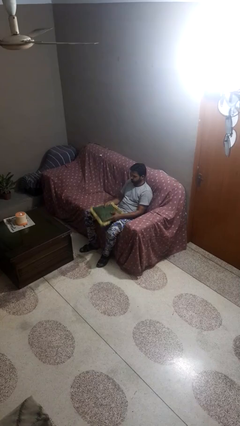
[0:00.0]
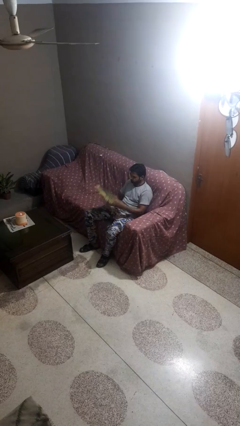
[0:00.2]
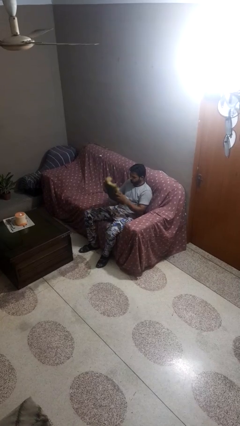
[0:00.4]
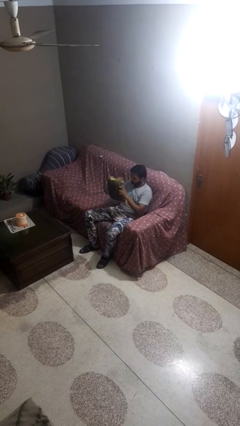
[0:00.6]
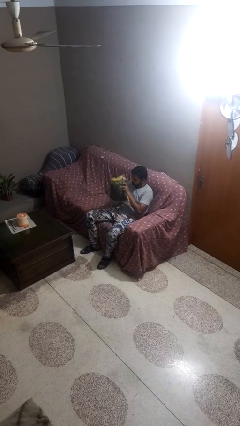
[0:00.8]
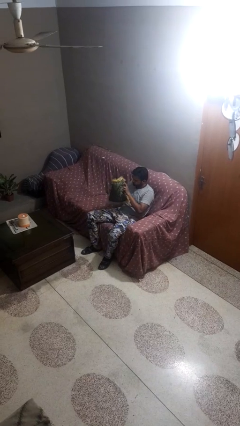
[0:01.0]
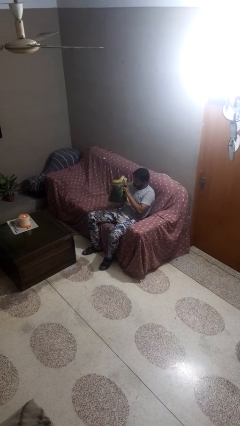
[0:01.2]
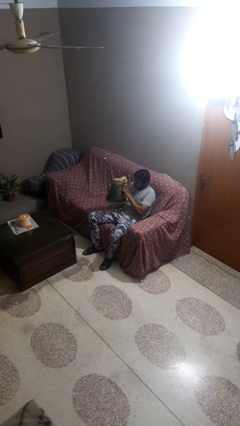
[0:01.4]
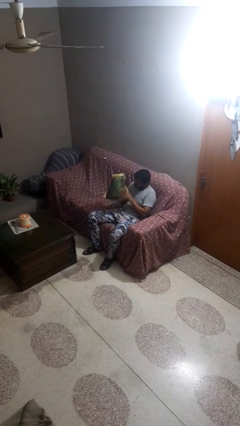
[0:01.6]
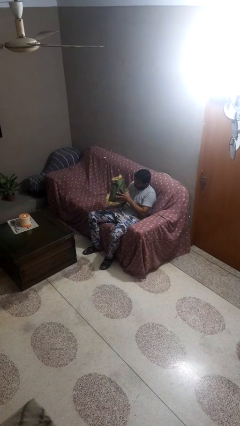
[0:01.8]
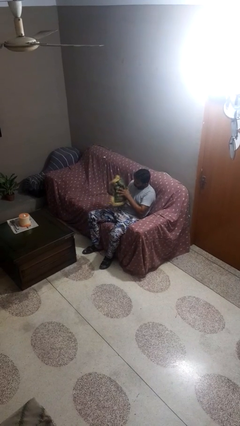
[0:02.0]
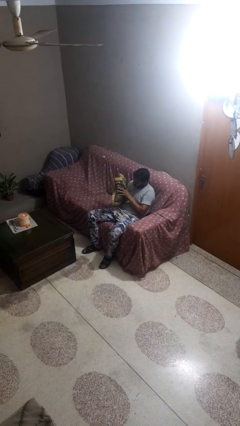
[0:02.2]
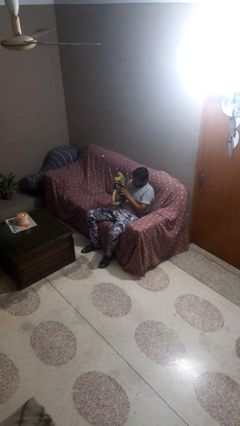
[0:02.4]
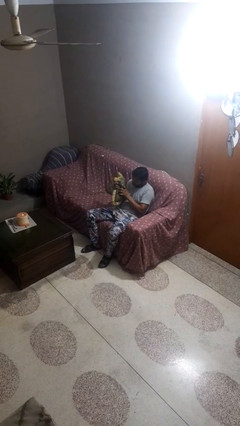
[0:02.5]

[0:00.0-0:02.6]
person squeezes object

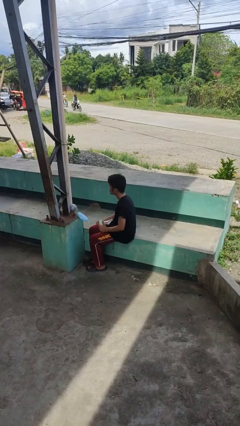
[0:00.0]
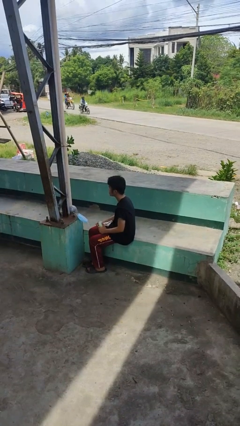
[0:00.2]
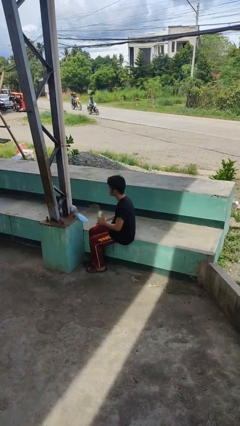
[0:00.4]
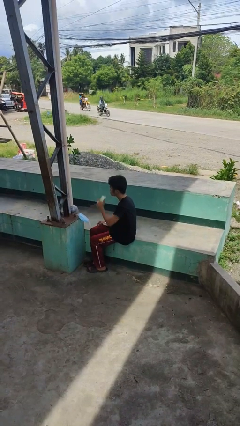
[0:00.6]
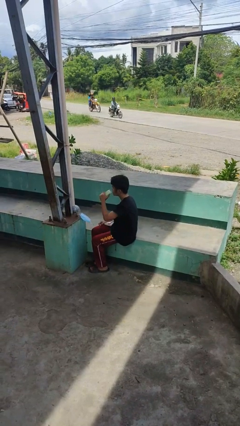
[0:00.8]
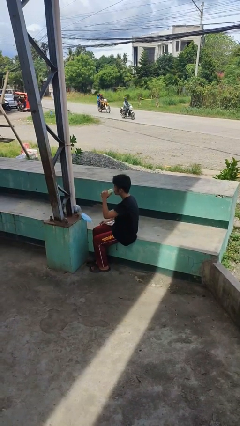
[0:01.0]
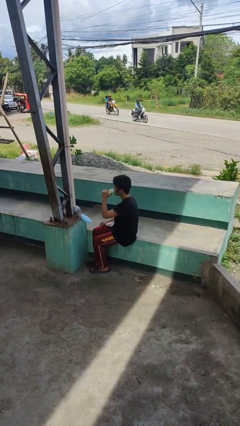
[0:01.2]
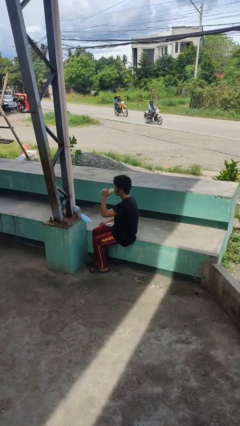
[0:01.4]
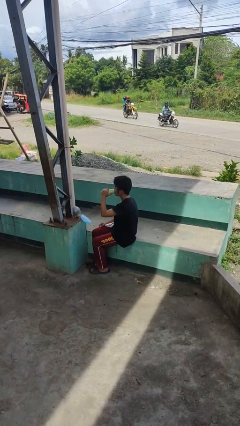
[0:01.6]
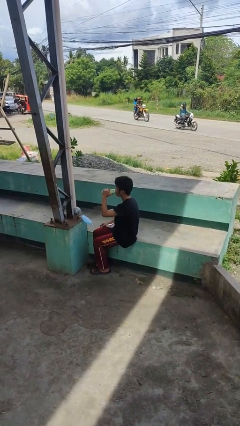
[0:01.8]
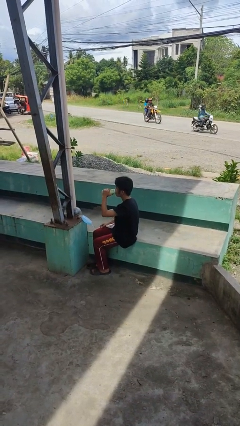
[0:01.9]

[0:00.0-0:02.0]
person interacts with tablet

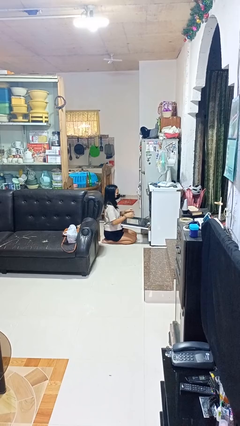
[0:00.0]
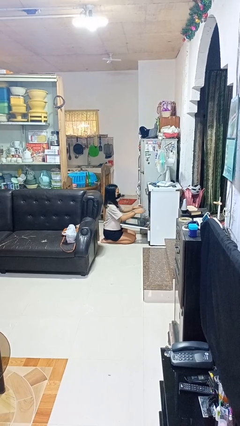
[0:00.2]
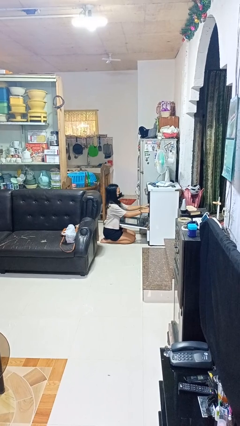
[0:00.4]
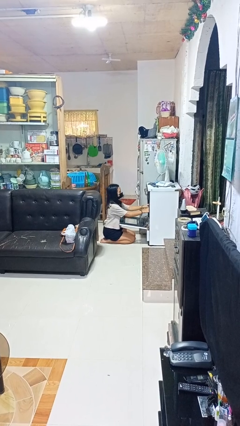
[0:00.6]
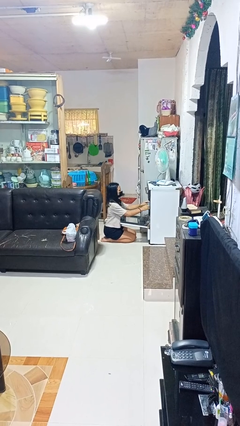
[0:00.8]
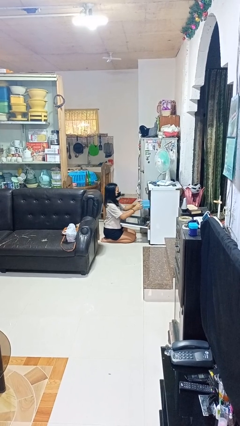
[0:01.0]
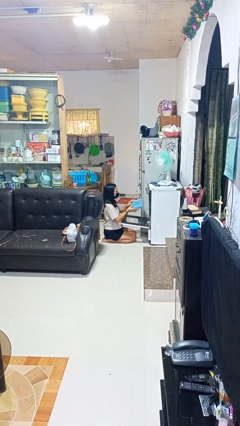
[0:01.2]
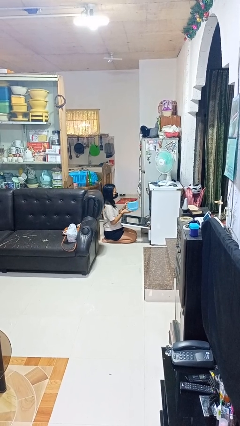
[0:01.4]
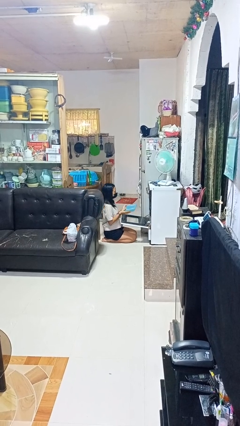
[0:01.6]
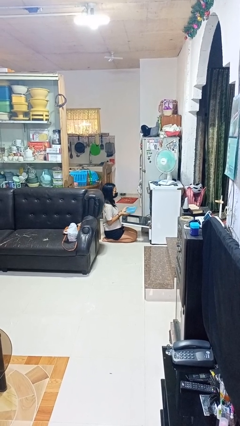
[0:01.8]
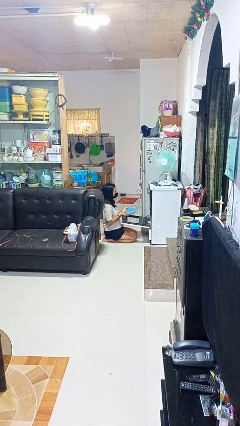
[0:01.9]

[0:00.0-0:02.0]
person takes object from oven

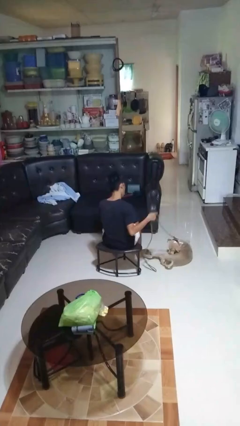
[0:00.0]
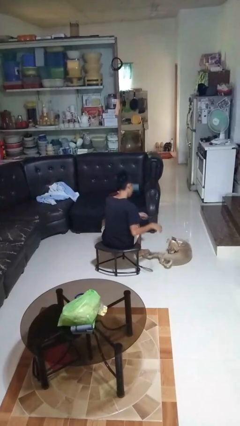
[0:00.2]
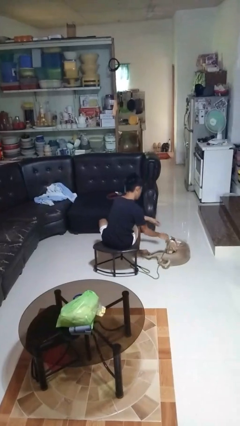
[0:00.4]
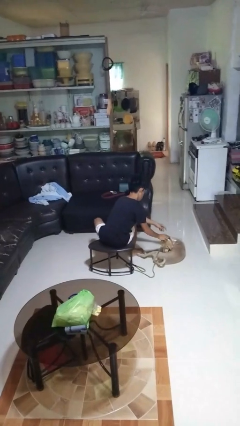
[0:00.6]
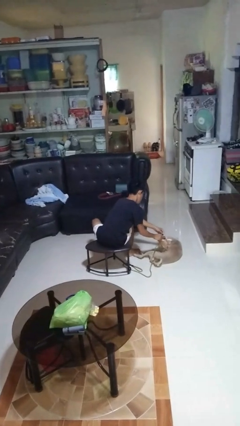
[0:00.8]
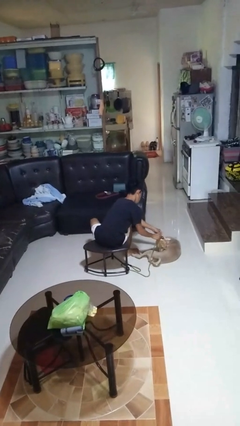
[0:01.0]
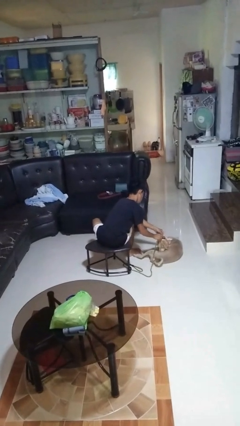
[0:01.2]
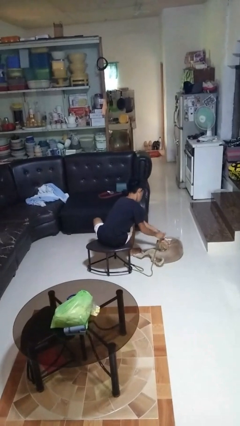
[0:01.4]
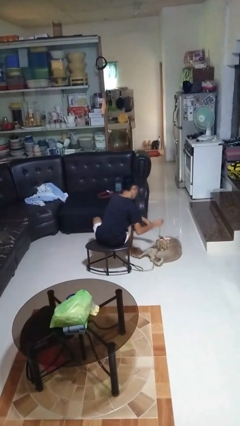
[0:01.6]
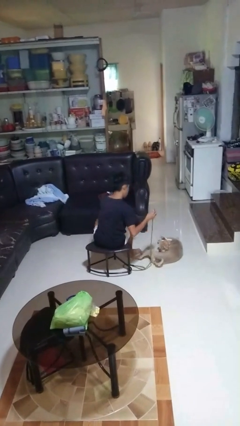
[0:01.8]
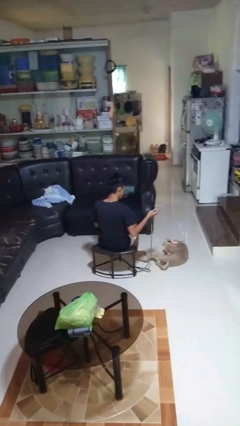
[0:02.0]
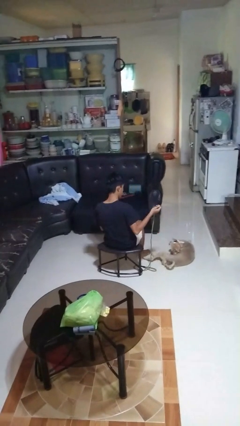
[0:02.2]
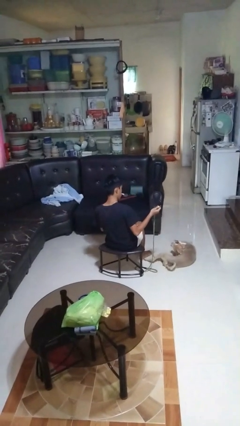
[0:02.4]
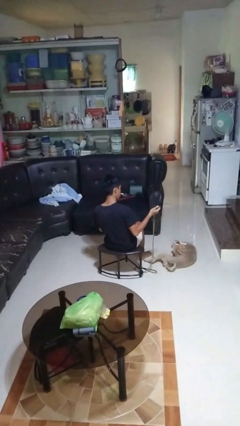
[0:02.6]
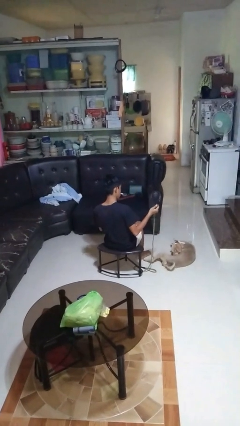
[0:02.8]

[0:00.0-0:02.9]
person unattaches leash from dog

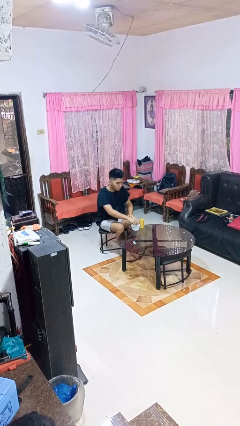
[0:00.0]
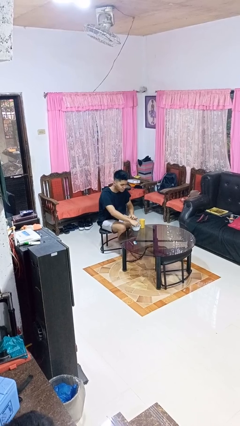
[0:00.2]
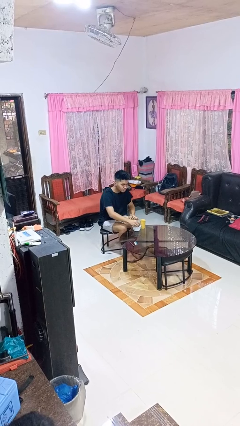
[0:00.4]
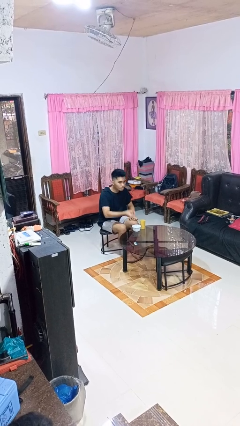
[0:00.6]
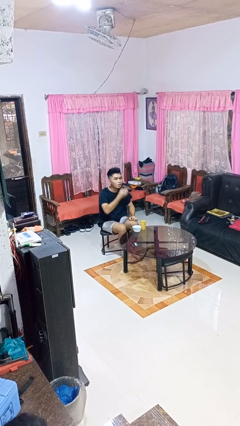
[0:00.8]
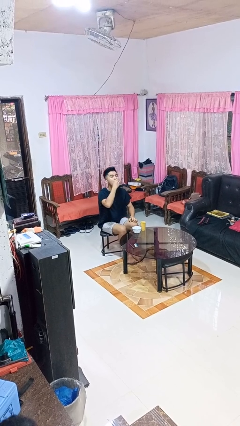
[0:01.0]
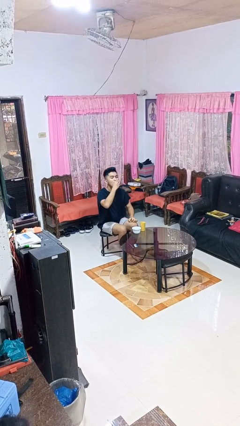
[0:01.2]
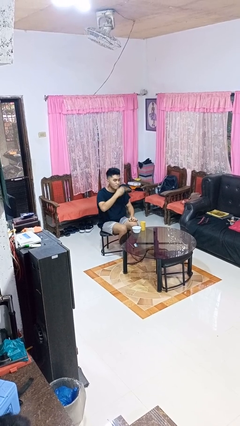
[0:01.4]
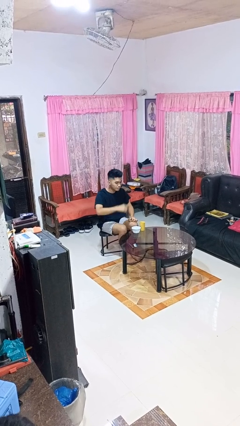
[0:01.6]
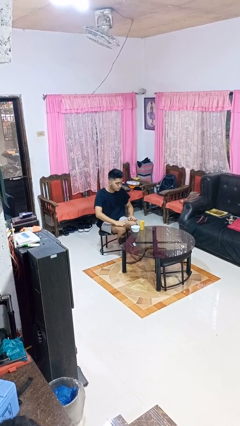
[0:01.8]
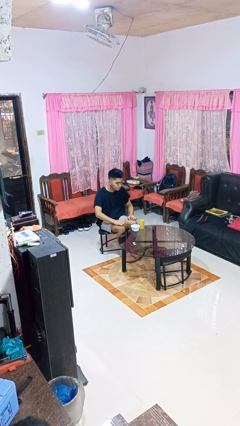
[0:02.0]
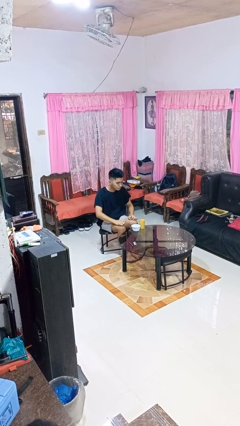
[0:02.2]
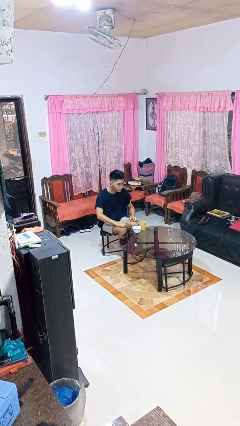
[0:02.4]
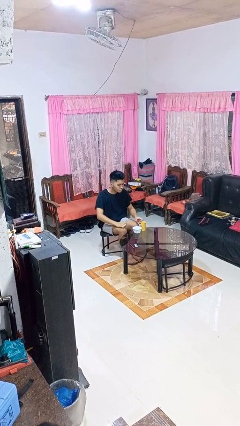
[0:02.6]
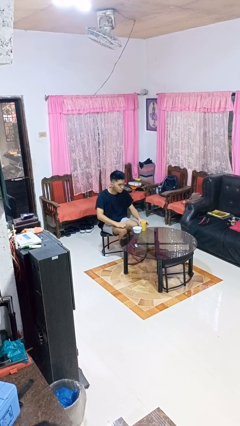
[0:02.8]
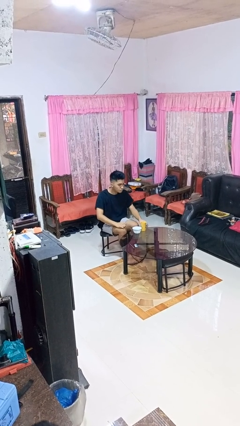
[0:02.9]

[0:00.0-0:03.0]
person takes medicine pills

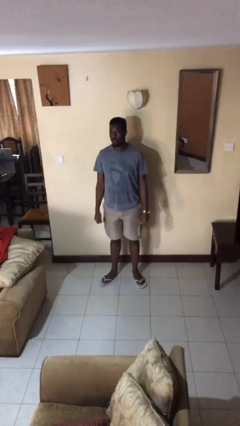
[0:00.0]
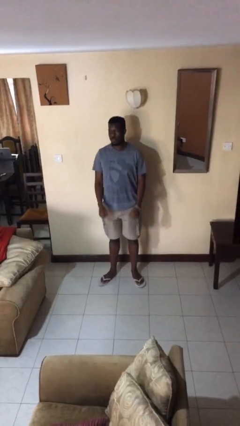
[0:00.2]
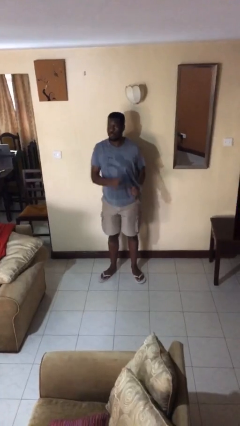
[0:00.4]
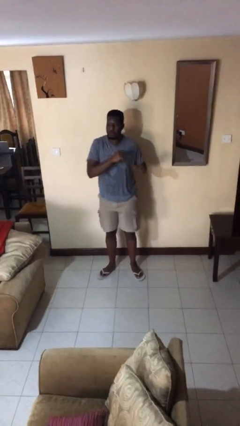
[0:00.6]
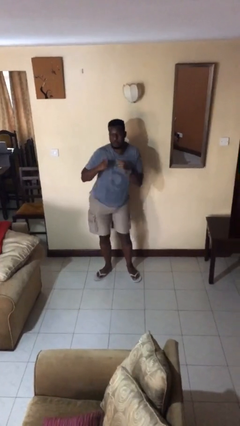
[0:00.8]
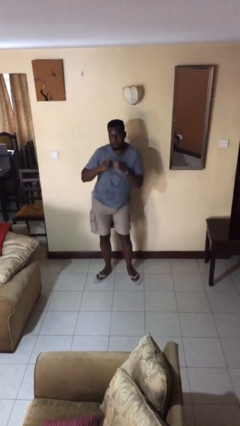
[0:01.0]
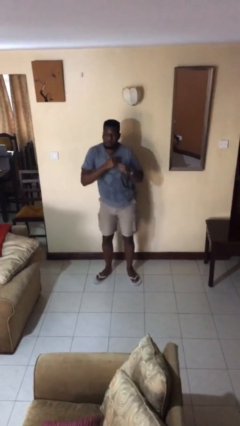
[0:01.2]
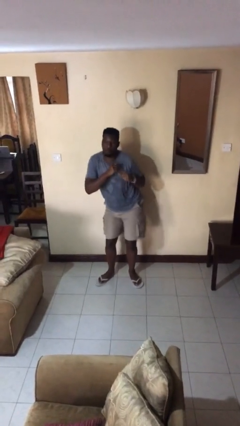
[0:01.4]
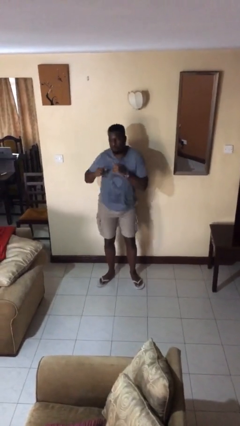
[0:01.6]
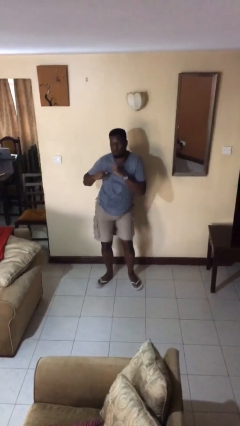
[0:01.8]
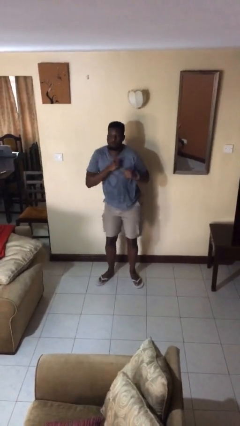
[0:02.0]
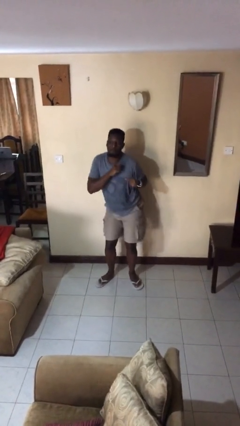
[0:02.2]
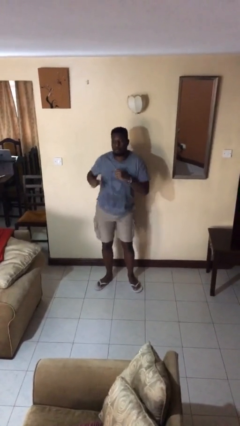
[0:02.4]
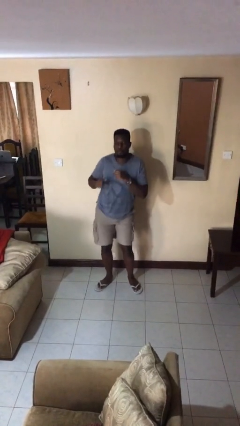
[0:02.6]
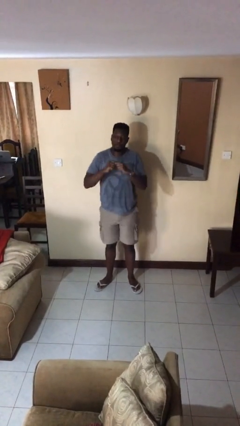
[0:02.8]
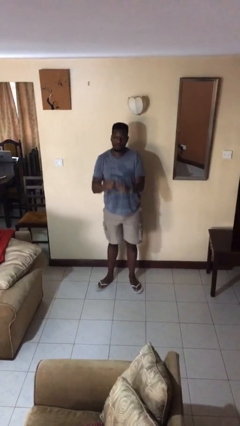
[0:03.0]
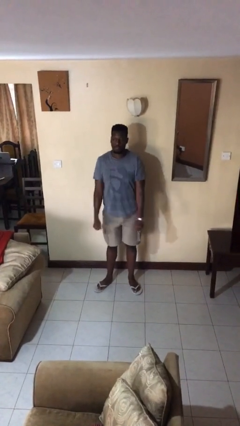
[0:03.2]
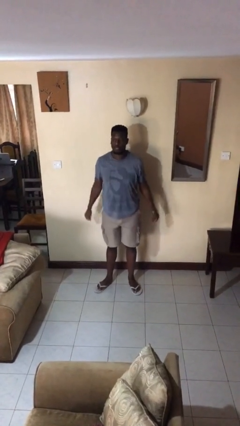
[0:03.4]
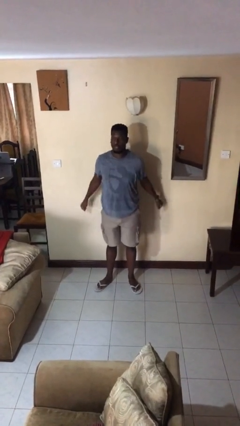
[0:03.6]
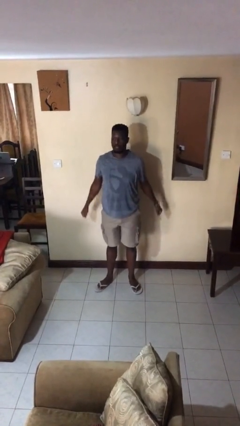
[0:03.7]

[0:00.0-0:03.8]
person wiggles hips

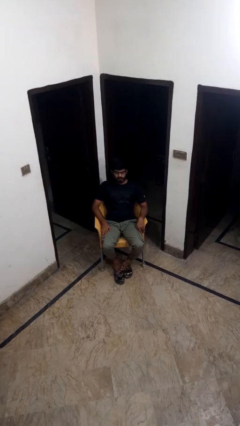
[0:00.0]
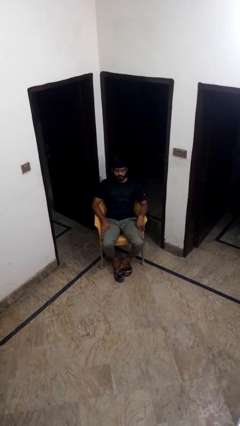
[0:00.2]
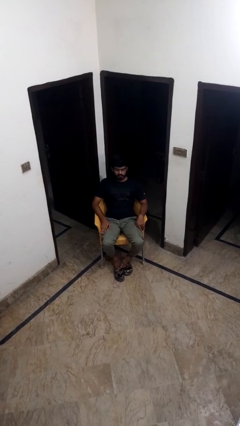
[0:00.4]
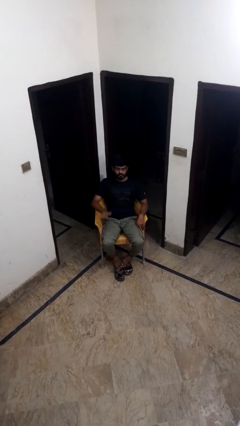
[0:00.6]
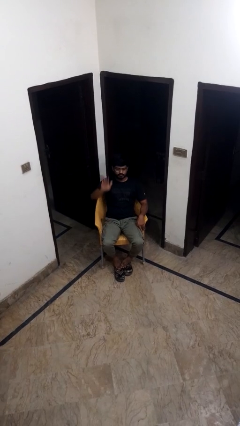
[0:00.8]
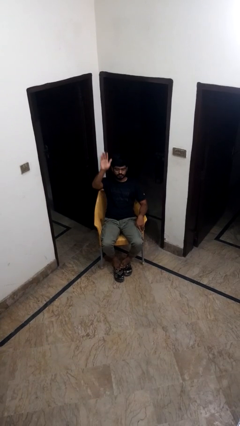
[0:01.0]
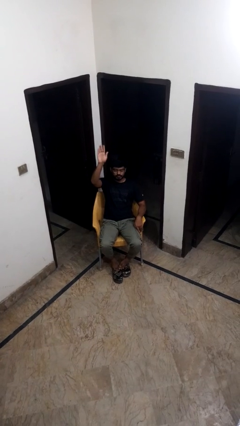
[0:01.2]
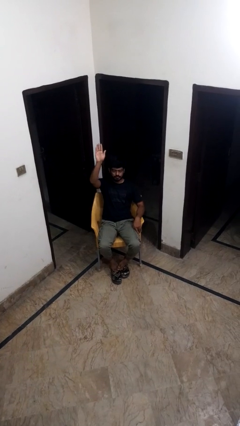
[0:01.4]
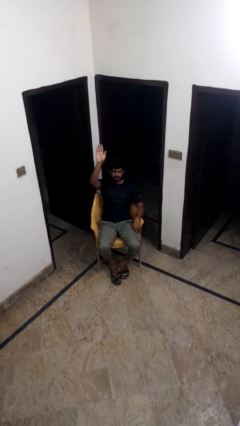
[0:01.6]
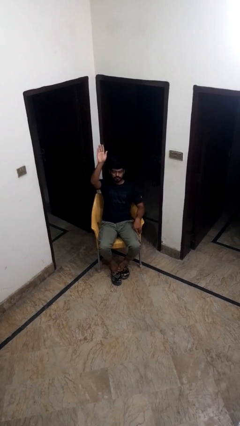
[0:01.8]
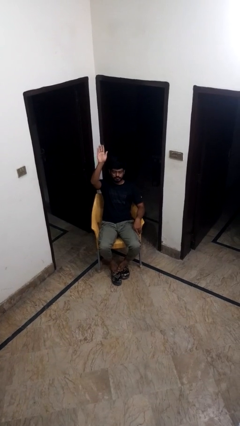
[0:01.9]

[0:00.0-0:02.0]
person gestures raise hand
